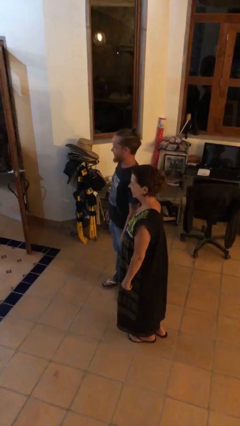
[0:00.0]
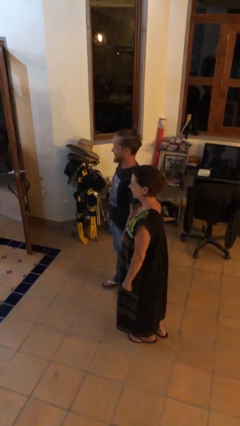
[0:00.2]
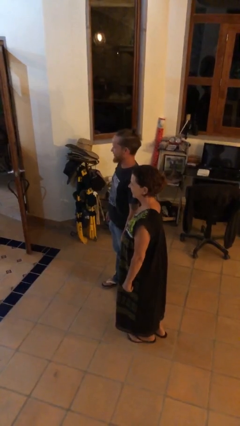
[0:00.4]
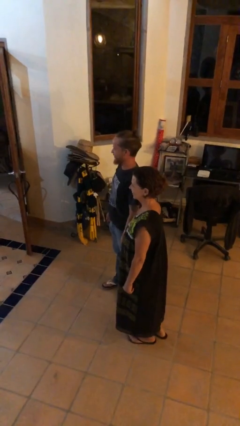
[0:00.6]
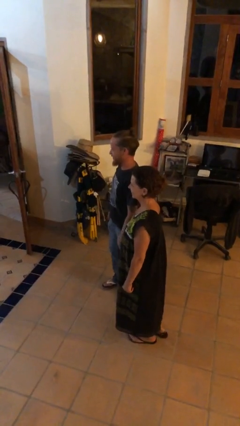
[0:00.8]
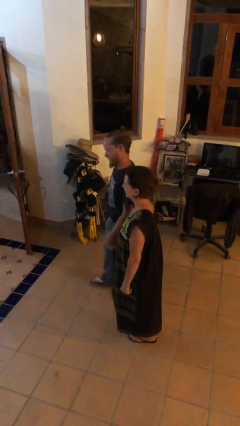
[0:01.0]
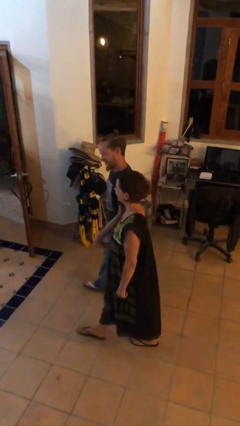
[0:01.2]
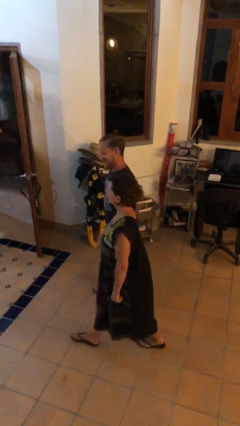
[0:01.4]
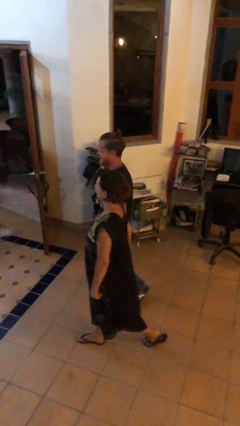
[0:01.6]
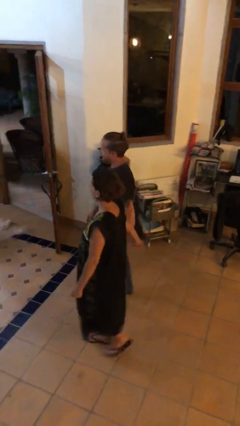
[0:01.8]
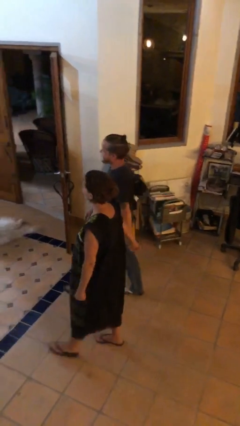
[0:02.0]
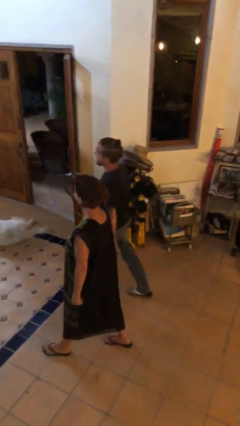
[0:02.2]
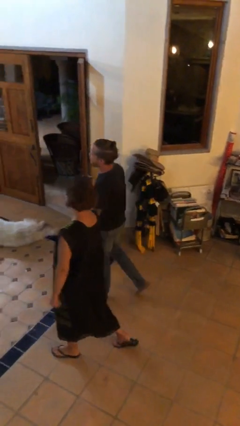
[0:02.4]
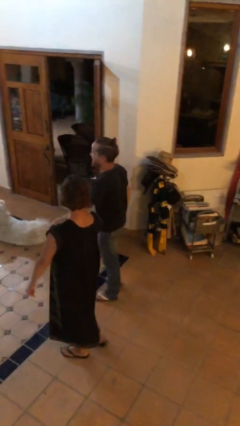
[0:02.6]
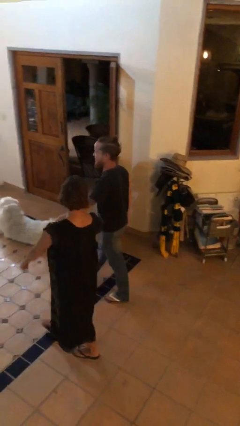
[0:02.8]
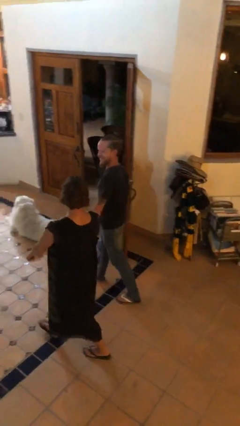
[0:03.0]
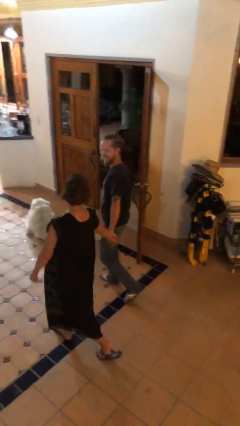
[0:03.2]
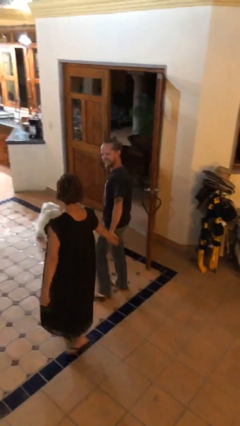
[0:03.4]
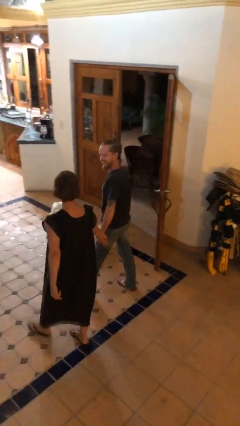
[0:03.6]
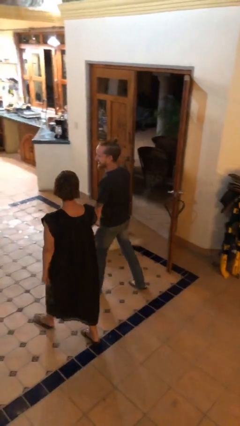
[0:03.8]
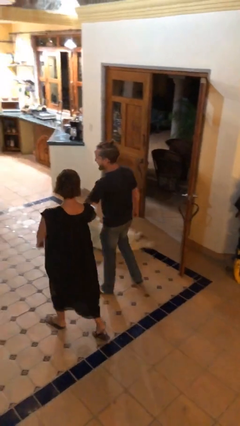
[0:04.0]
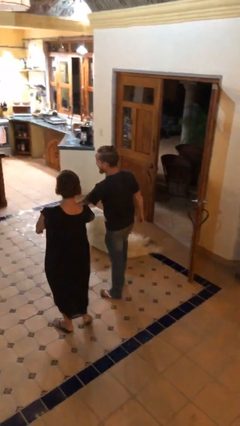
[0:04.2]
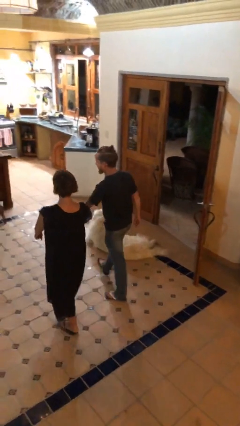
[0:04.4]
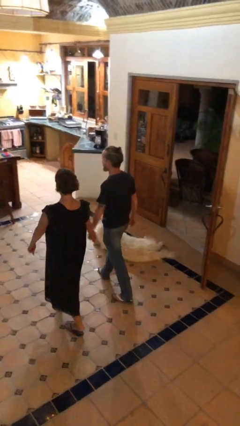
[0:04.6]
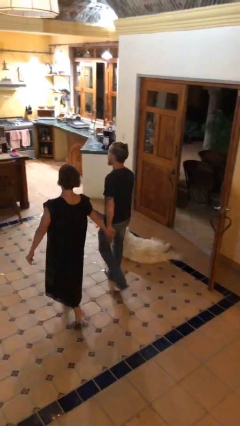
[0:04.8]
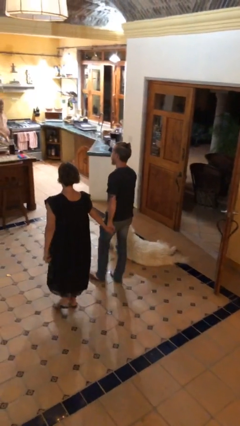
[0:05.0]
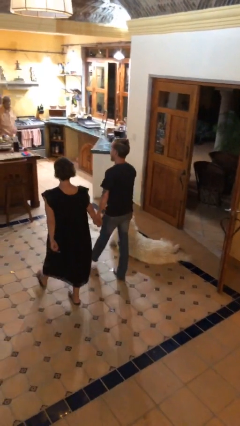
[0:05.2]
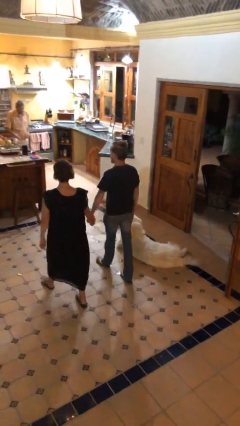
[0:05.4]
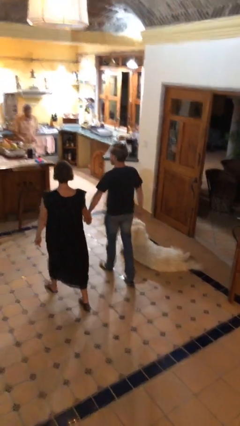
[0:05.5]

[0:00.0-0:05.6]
person holds hand

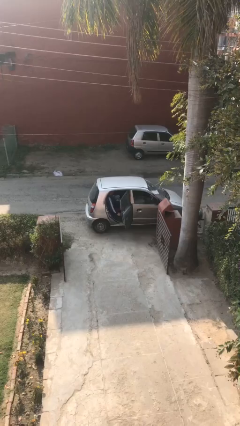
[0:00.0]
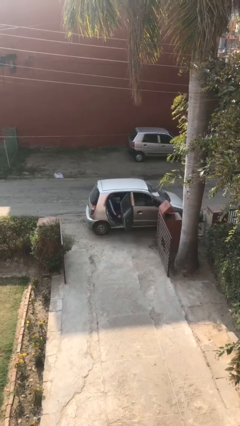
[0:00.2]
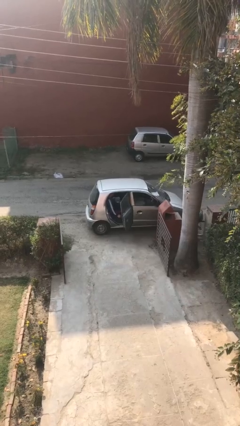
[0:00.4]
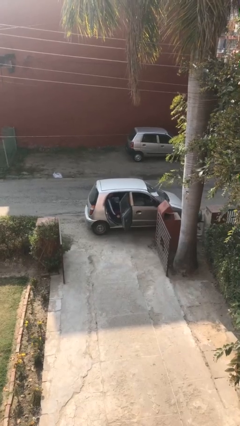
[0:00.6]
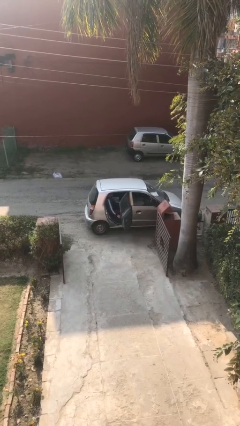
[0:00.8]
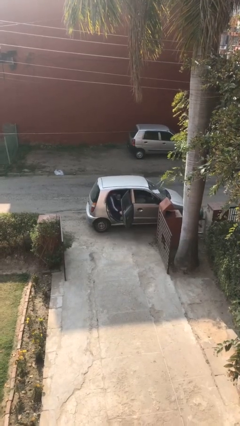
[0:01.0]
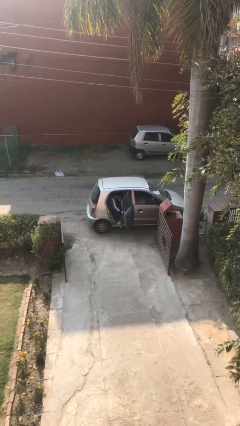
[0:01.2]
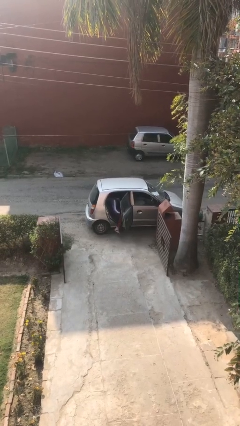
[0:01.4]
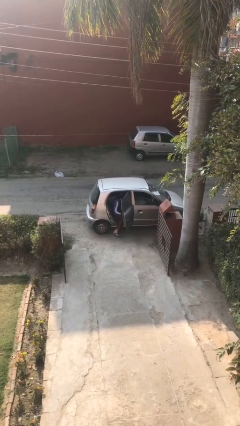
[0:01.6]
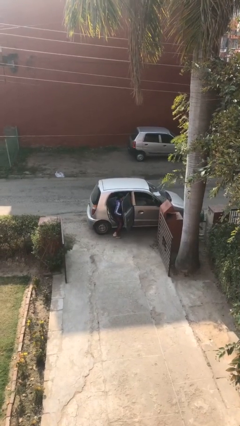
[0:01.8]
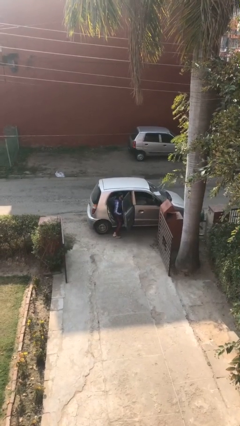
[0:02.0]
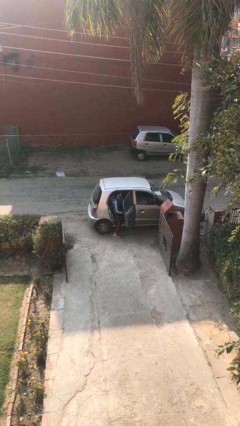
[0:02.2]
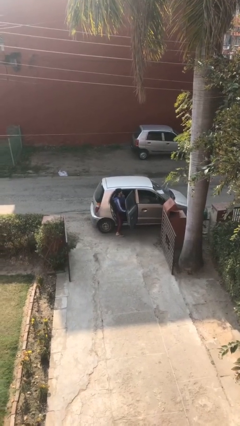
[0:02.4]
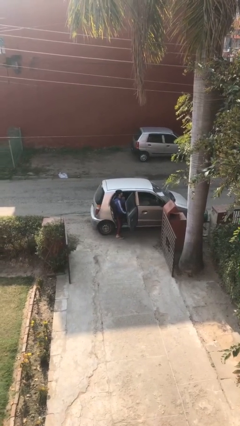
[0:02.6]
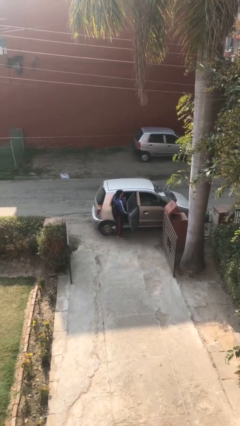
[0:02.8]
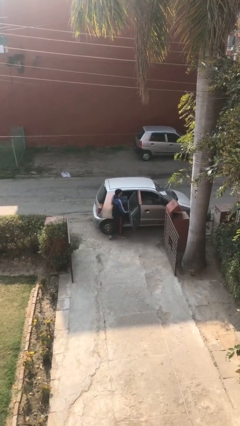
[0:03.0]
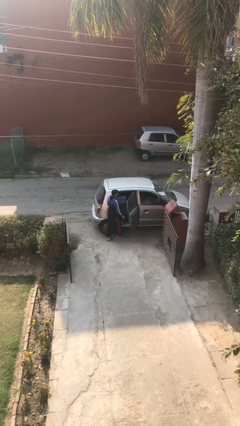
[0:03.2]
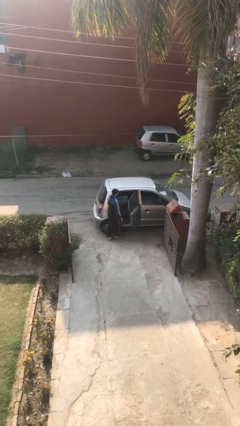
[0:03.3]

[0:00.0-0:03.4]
person exits car

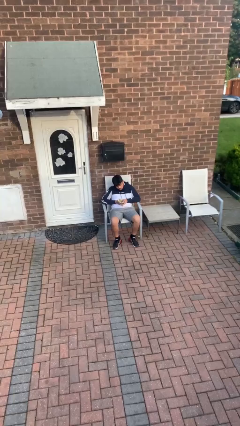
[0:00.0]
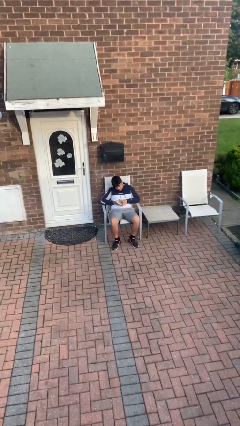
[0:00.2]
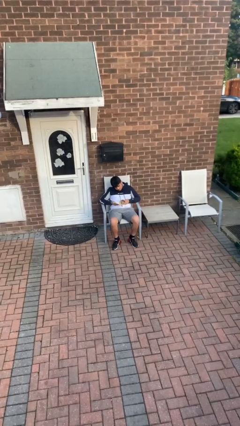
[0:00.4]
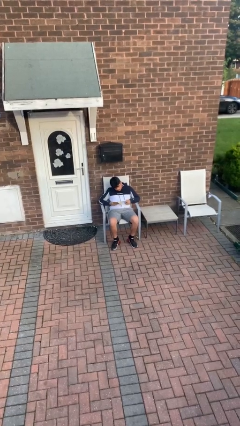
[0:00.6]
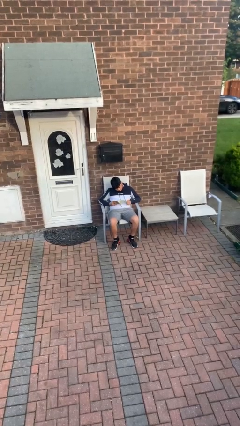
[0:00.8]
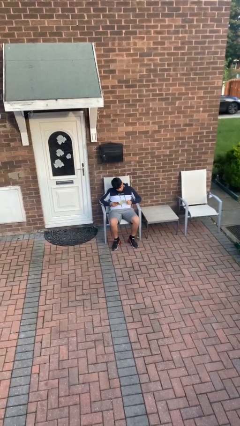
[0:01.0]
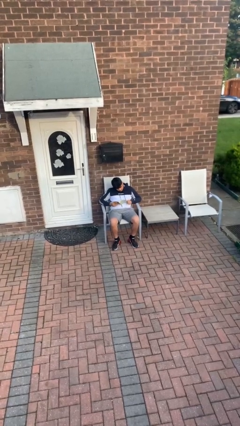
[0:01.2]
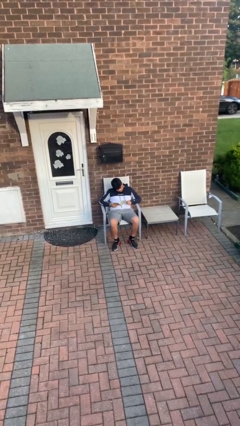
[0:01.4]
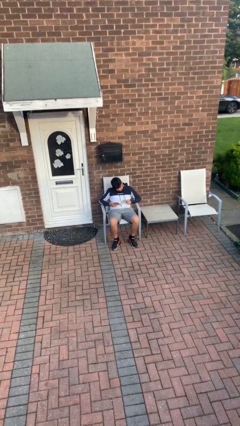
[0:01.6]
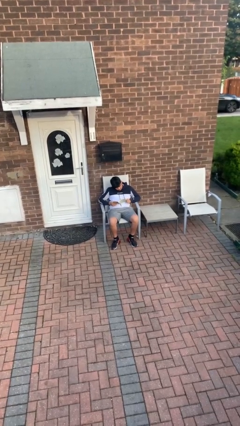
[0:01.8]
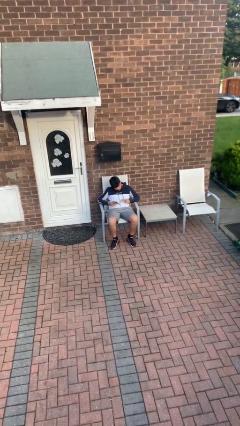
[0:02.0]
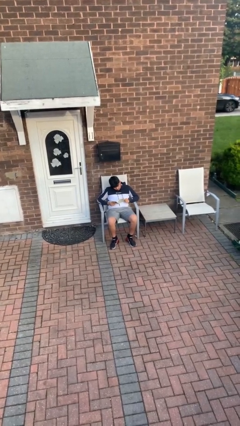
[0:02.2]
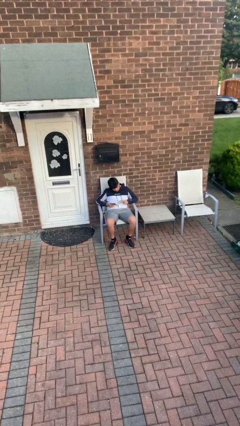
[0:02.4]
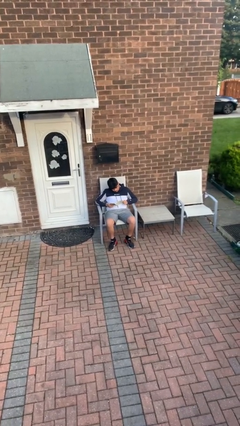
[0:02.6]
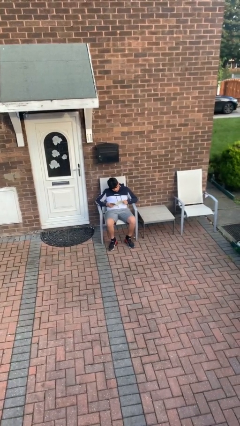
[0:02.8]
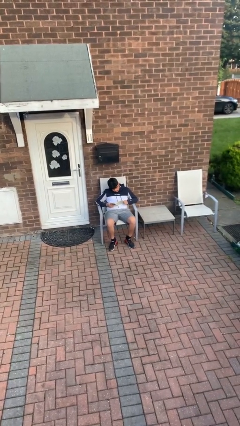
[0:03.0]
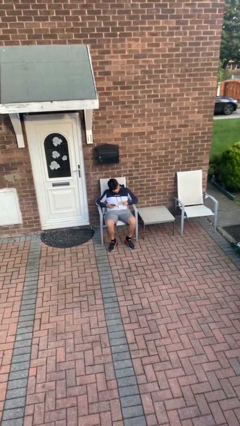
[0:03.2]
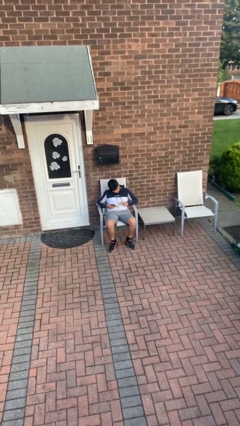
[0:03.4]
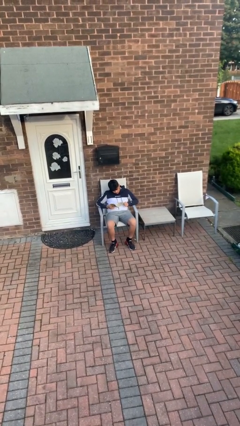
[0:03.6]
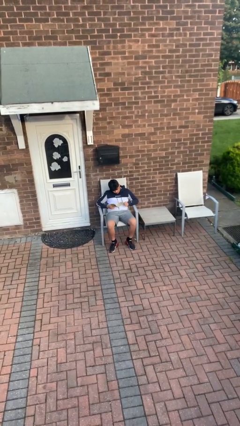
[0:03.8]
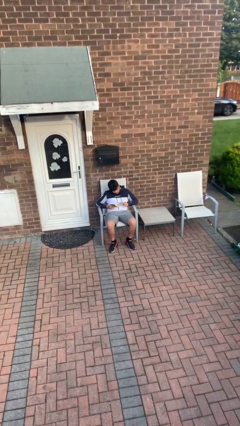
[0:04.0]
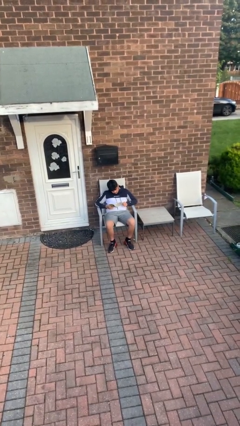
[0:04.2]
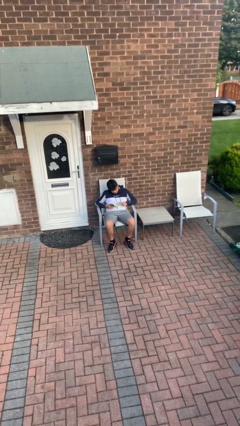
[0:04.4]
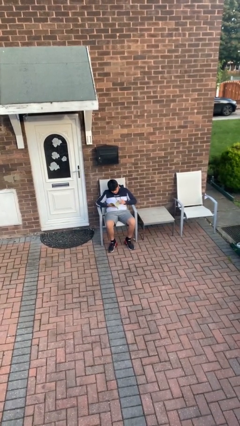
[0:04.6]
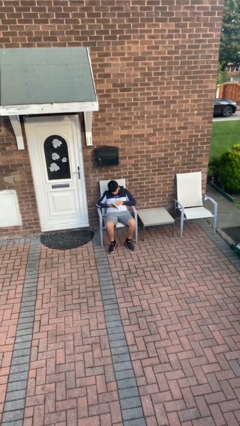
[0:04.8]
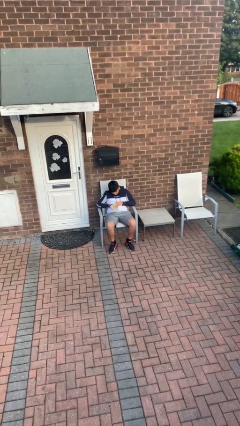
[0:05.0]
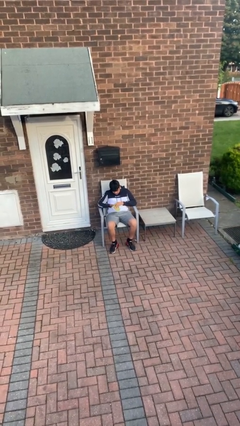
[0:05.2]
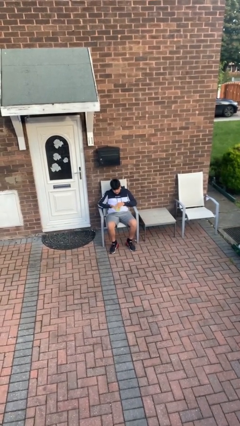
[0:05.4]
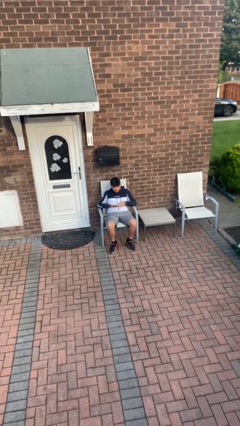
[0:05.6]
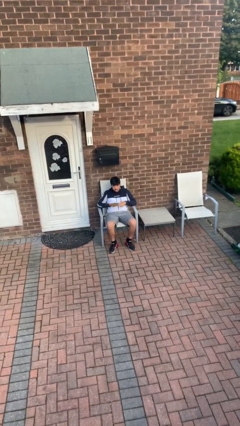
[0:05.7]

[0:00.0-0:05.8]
person reads document

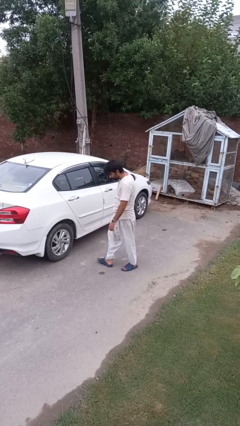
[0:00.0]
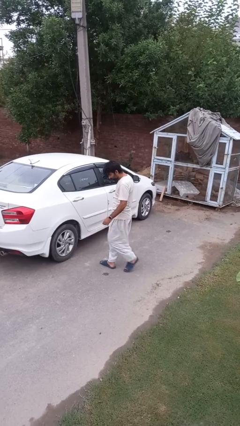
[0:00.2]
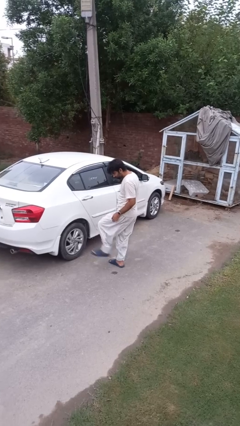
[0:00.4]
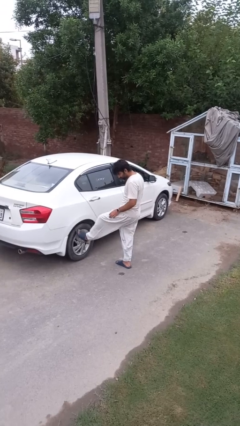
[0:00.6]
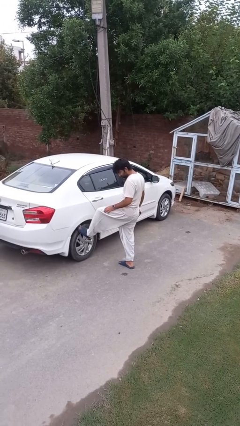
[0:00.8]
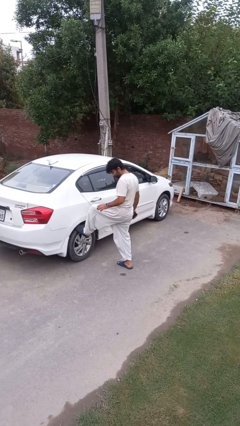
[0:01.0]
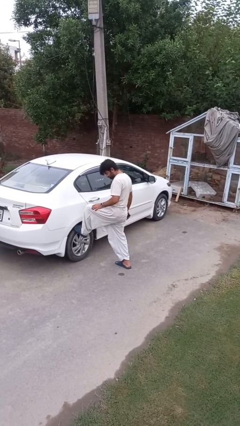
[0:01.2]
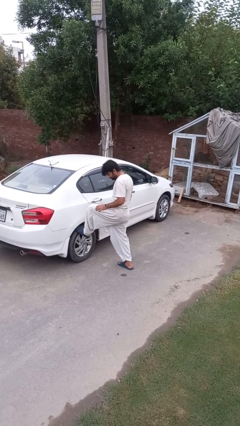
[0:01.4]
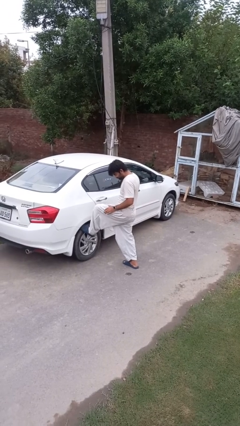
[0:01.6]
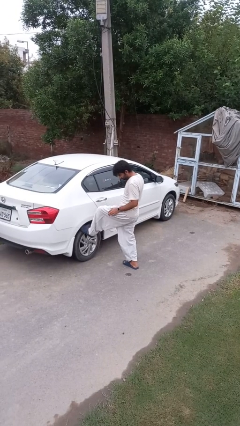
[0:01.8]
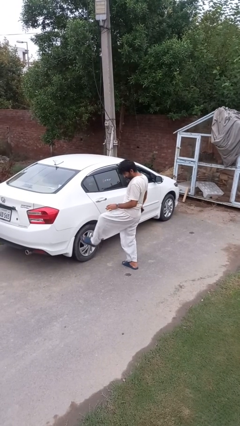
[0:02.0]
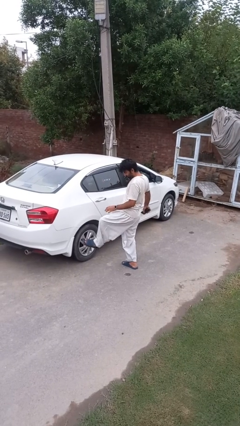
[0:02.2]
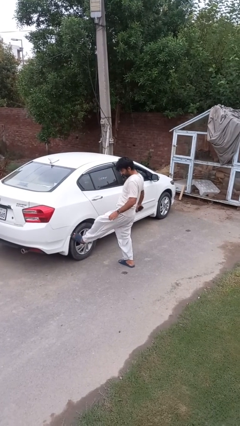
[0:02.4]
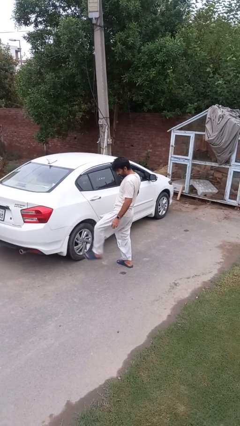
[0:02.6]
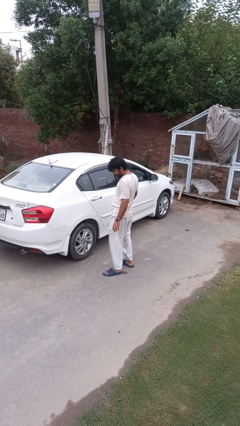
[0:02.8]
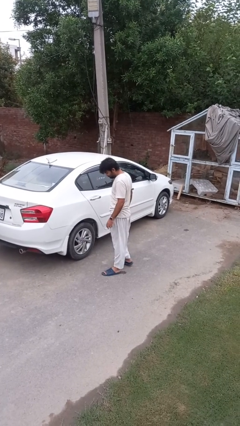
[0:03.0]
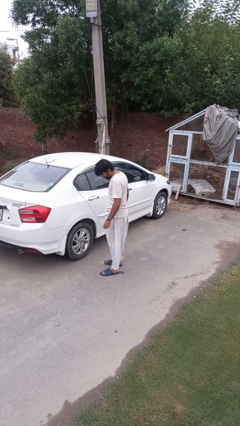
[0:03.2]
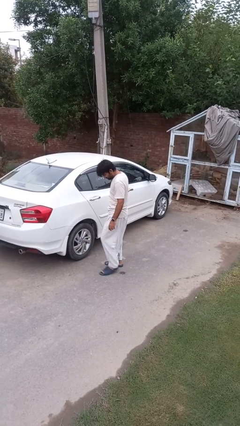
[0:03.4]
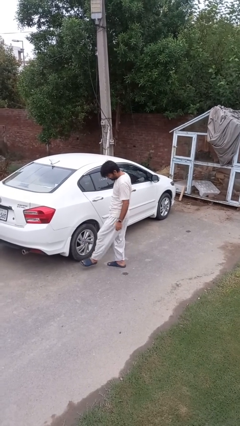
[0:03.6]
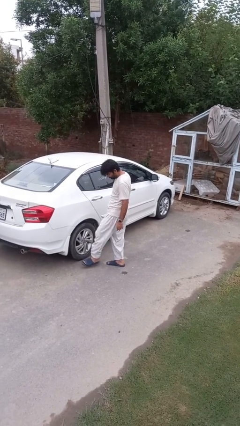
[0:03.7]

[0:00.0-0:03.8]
person kicks car tires
